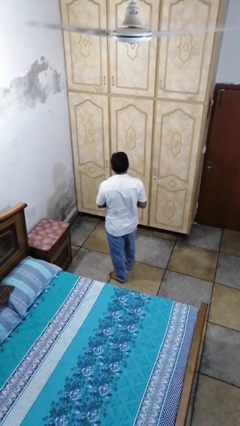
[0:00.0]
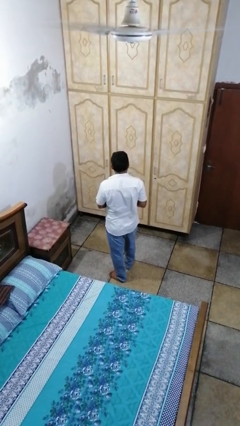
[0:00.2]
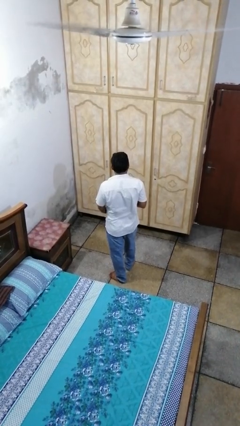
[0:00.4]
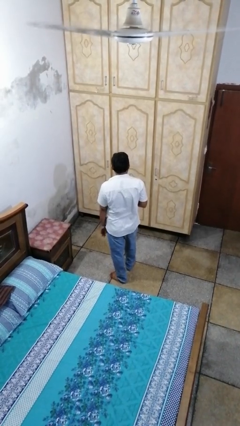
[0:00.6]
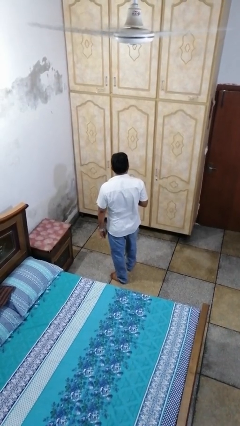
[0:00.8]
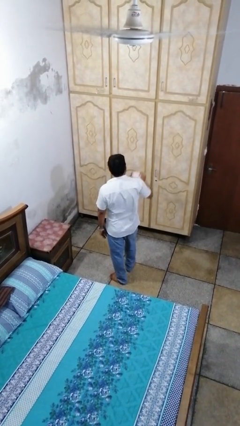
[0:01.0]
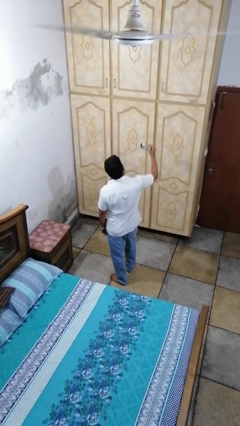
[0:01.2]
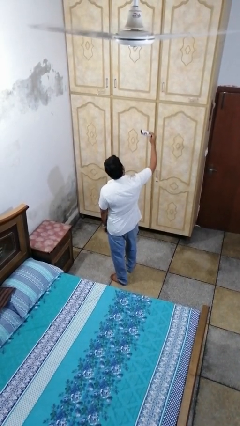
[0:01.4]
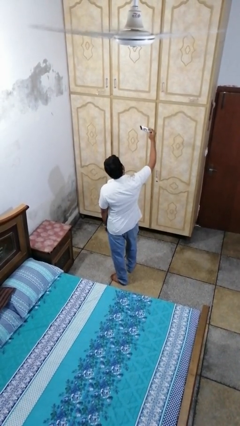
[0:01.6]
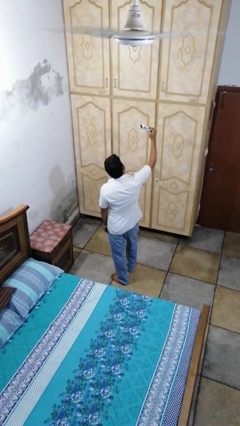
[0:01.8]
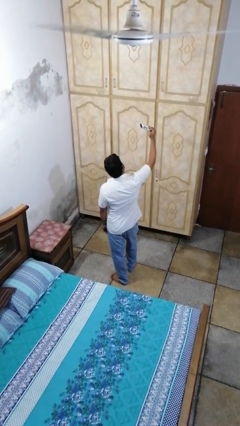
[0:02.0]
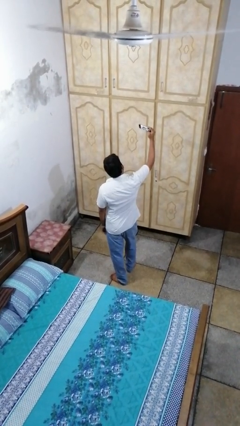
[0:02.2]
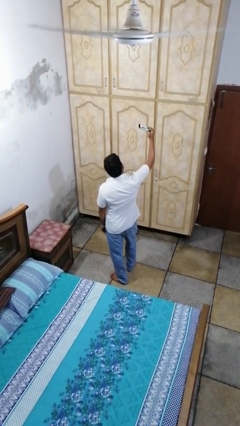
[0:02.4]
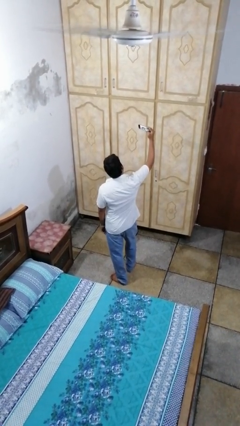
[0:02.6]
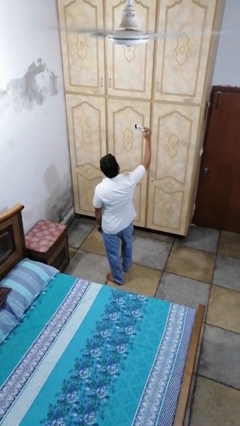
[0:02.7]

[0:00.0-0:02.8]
person takes selfie

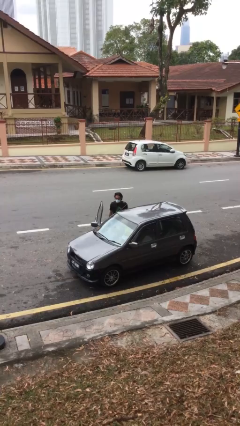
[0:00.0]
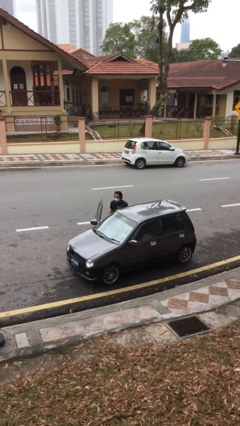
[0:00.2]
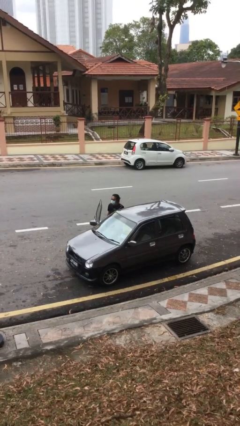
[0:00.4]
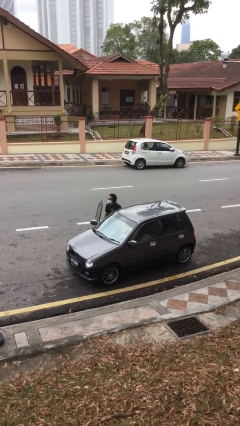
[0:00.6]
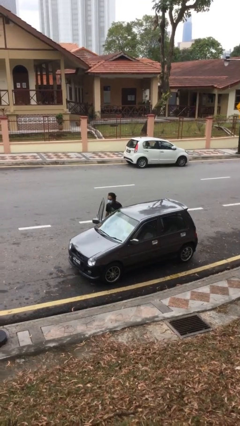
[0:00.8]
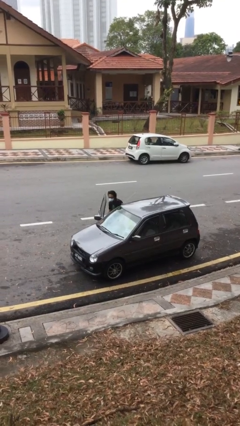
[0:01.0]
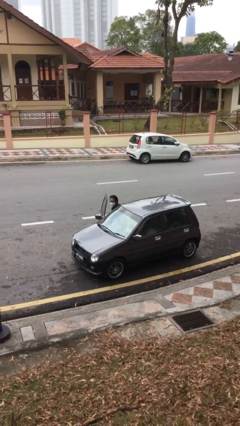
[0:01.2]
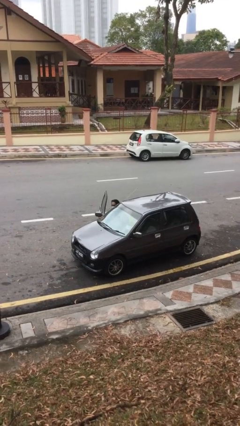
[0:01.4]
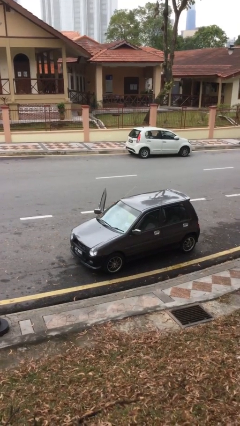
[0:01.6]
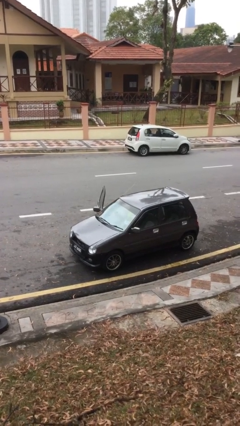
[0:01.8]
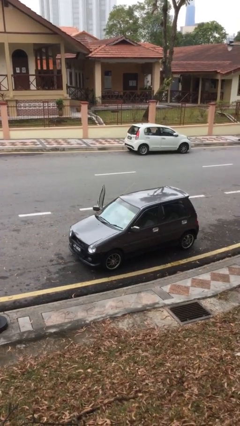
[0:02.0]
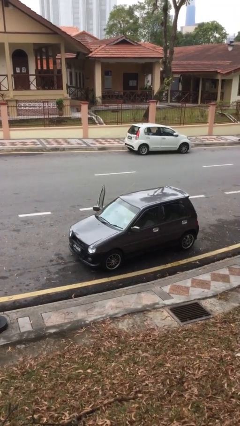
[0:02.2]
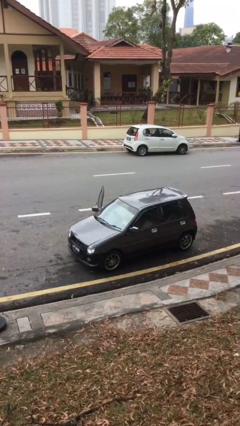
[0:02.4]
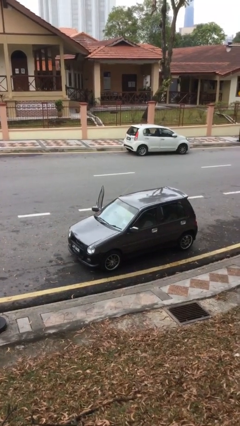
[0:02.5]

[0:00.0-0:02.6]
person enters car

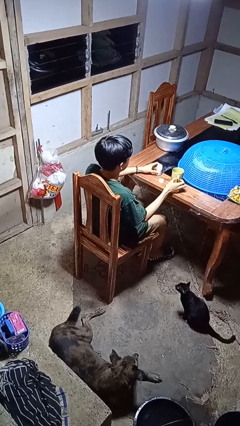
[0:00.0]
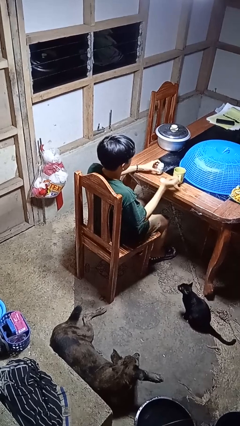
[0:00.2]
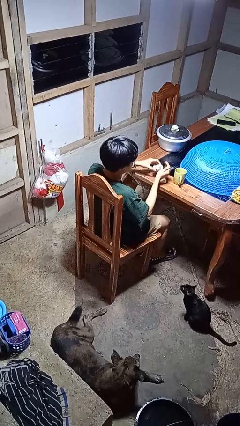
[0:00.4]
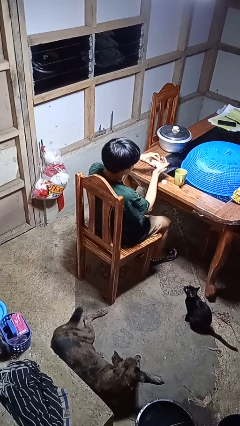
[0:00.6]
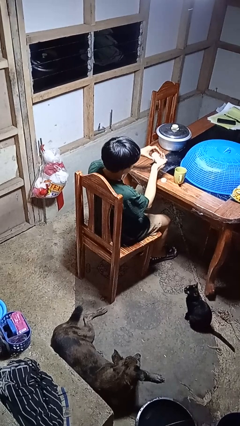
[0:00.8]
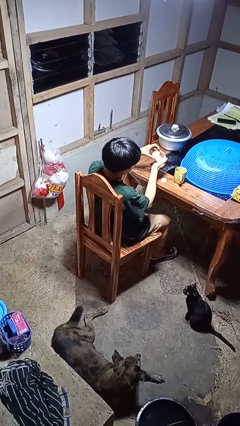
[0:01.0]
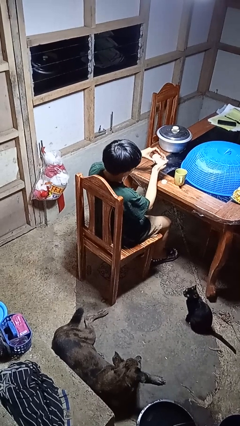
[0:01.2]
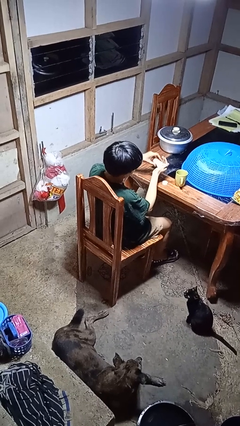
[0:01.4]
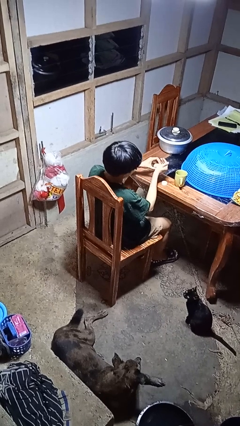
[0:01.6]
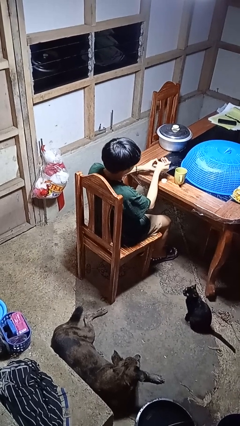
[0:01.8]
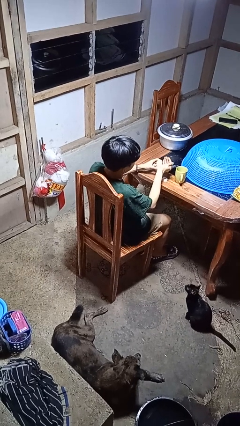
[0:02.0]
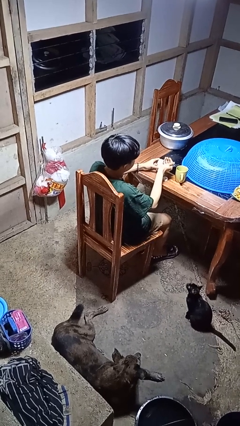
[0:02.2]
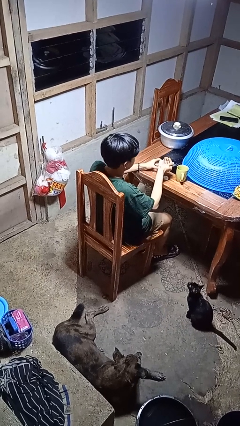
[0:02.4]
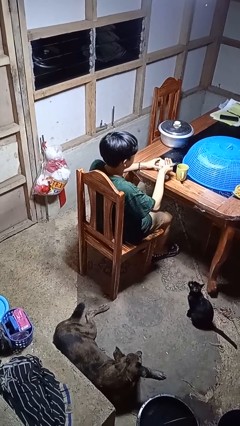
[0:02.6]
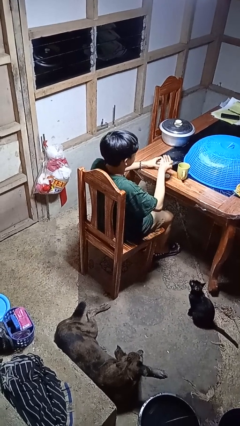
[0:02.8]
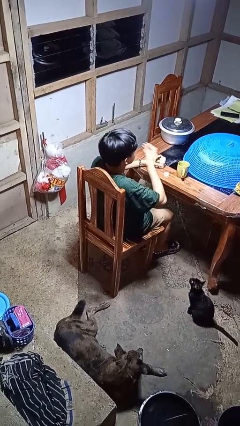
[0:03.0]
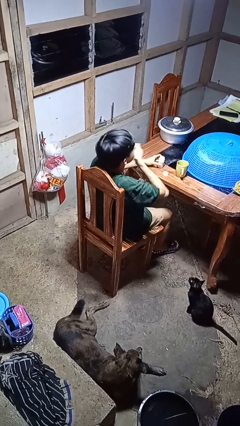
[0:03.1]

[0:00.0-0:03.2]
person takes medicine pills

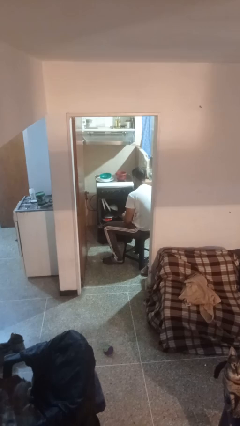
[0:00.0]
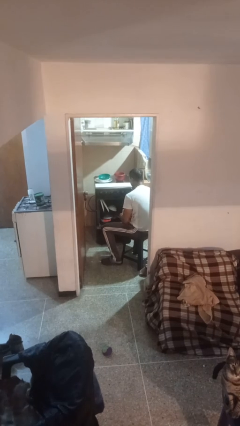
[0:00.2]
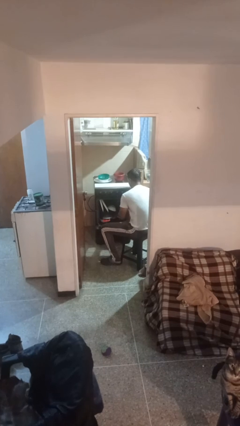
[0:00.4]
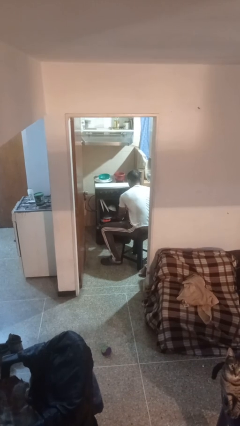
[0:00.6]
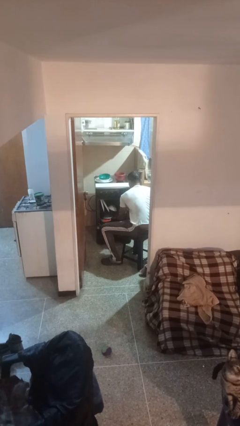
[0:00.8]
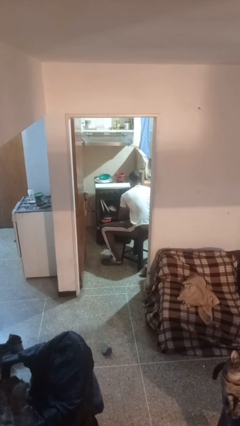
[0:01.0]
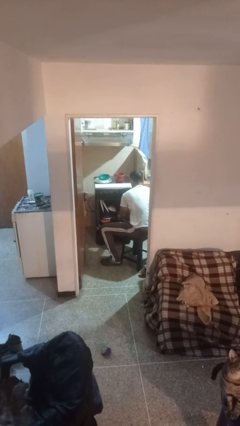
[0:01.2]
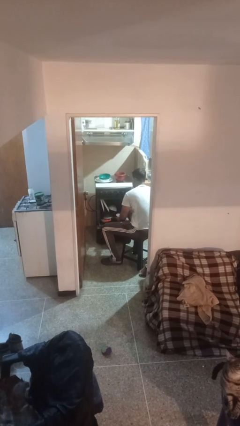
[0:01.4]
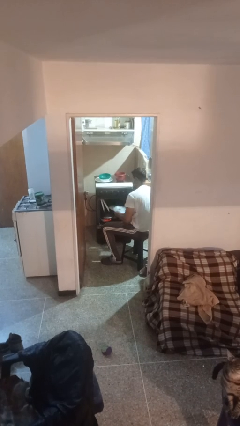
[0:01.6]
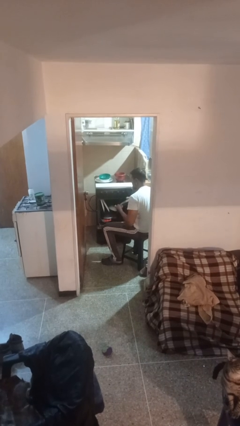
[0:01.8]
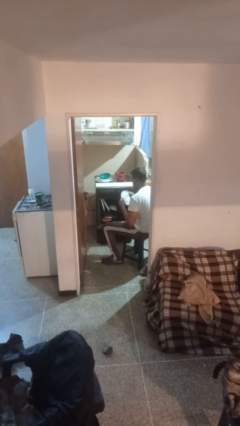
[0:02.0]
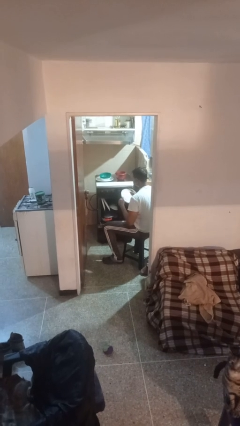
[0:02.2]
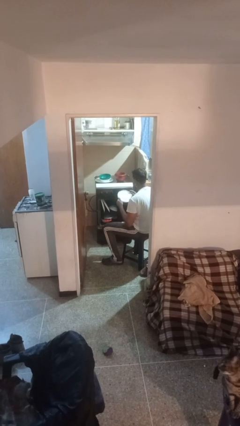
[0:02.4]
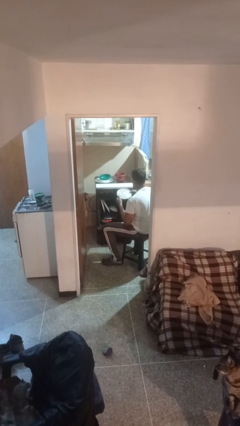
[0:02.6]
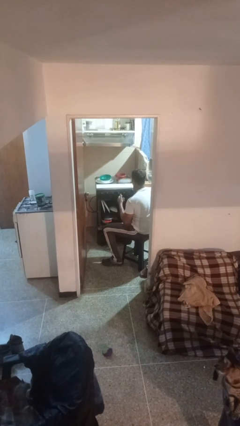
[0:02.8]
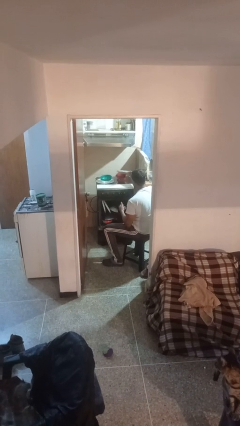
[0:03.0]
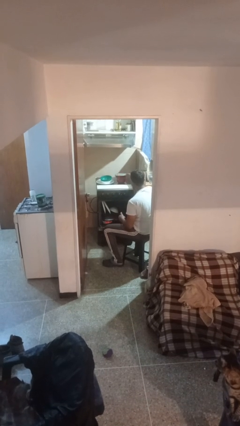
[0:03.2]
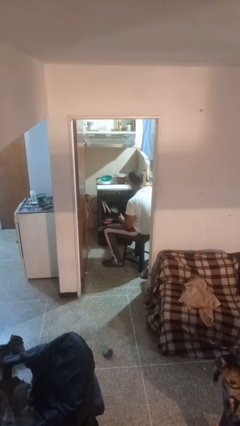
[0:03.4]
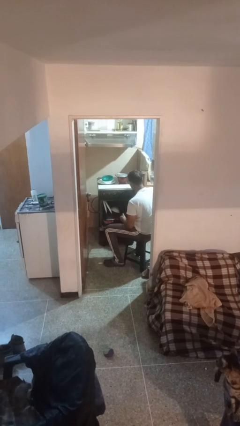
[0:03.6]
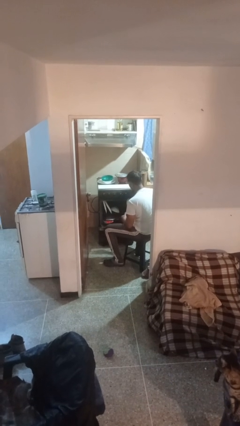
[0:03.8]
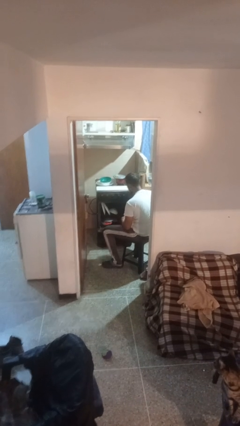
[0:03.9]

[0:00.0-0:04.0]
person unloads dishwasher

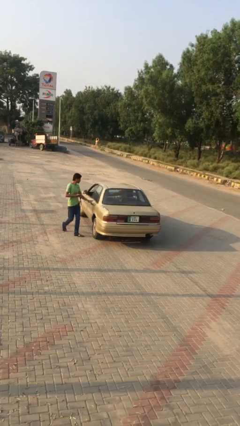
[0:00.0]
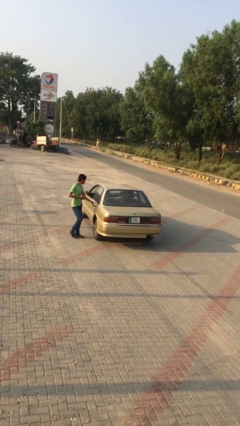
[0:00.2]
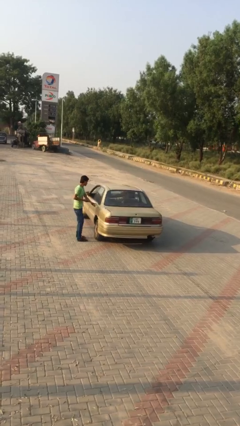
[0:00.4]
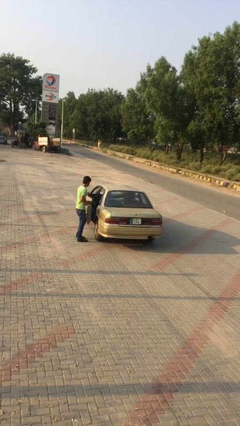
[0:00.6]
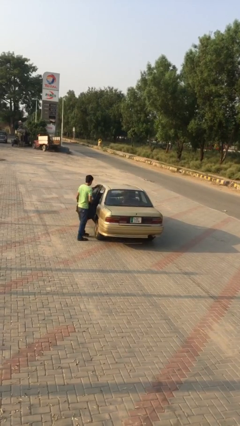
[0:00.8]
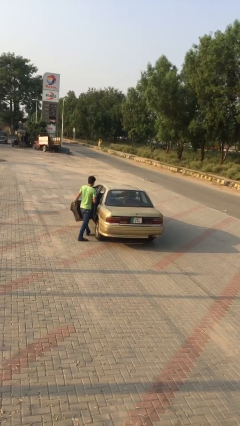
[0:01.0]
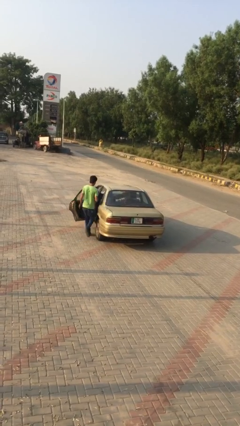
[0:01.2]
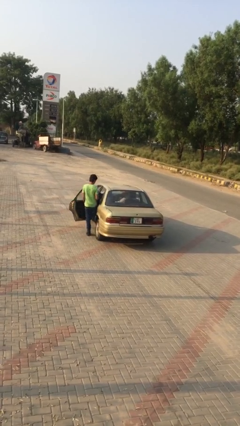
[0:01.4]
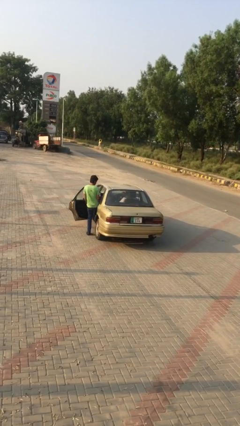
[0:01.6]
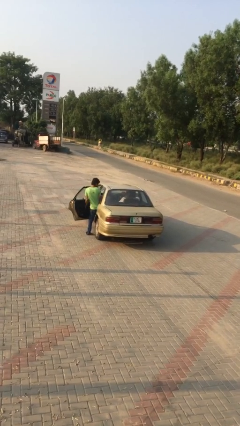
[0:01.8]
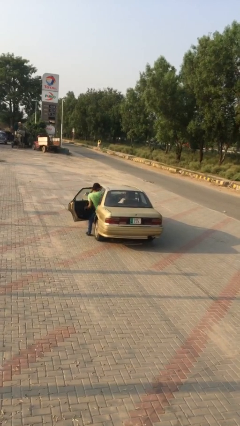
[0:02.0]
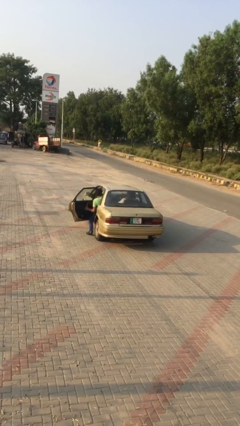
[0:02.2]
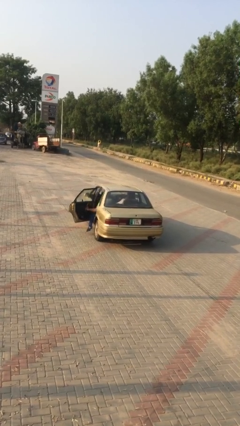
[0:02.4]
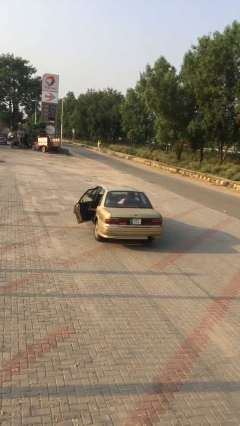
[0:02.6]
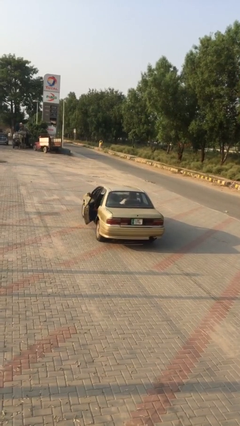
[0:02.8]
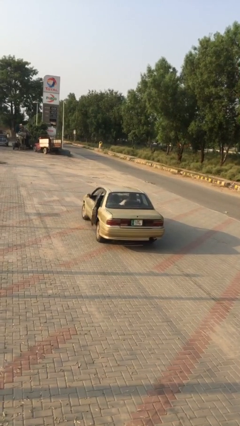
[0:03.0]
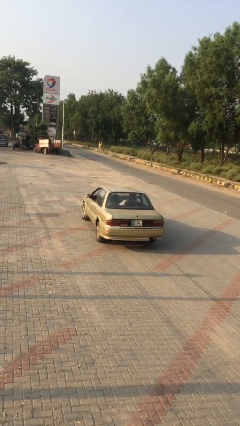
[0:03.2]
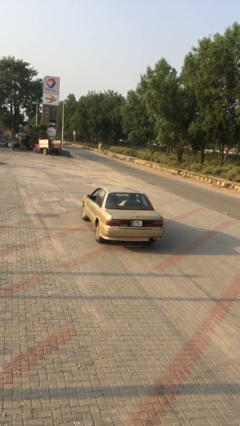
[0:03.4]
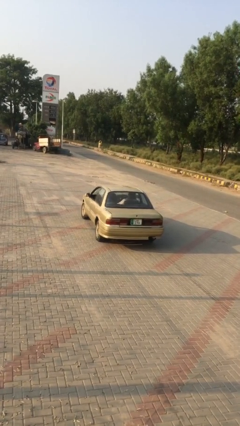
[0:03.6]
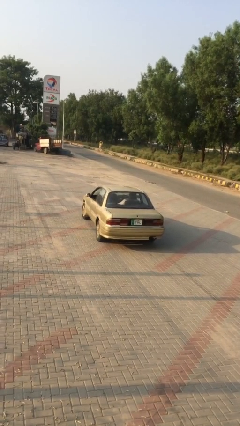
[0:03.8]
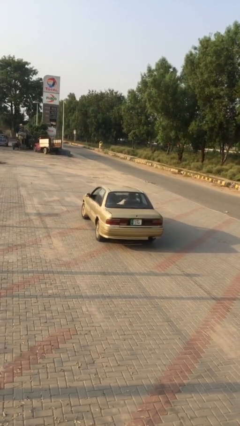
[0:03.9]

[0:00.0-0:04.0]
car picks up person

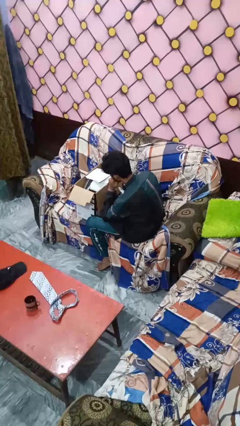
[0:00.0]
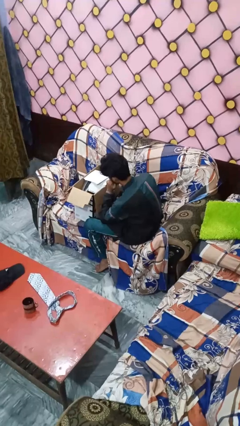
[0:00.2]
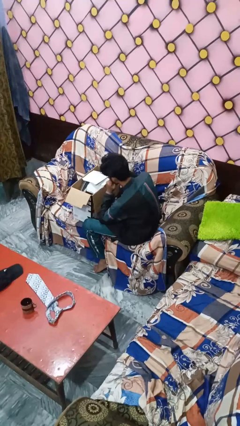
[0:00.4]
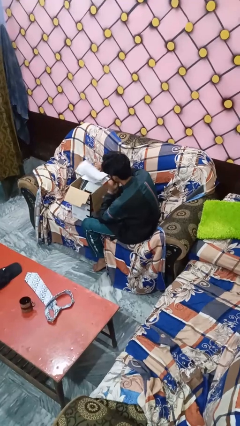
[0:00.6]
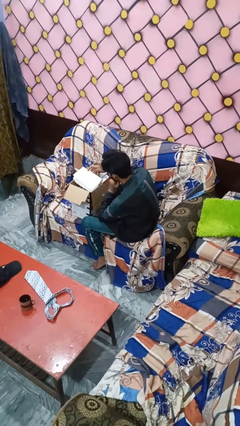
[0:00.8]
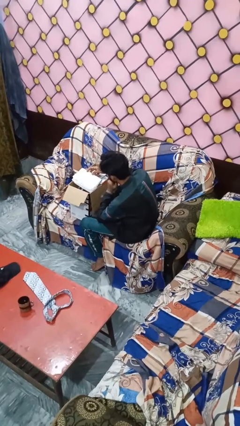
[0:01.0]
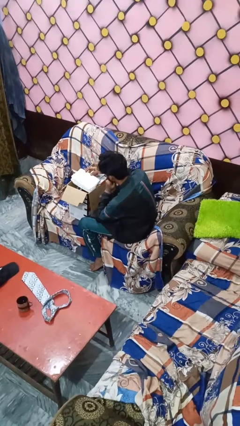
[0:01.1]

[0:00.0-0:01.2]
person wraps box
